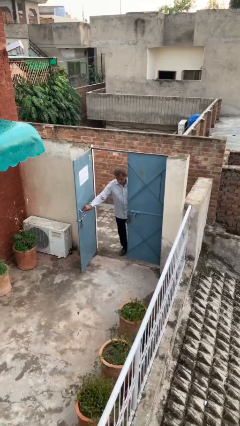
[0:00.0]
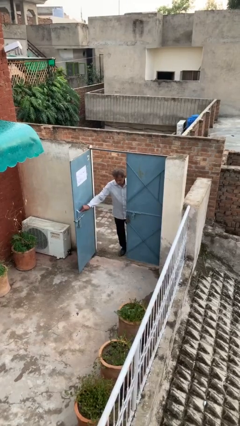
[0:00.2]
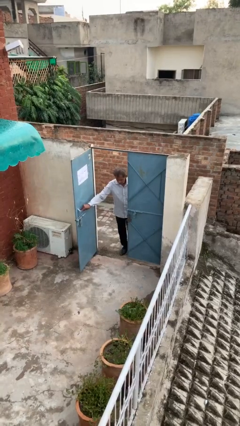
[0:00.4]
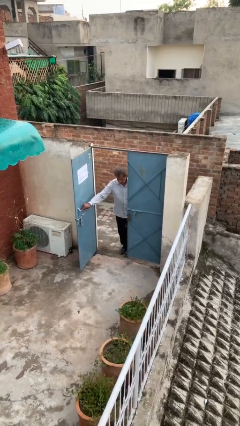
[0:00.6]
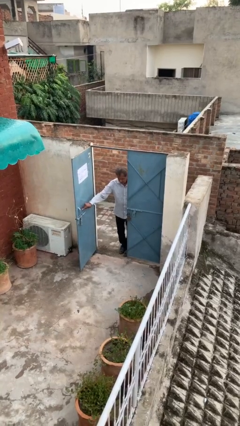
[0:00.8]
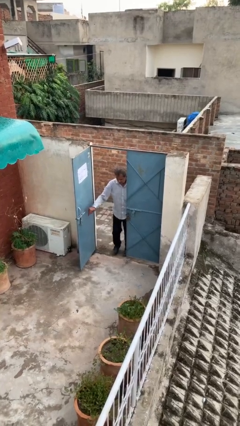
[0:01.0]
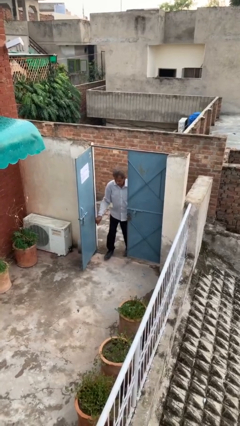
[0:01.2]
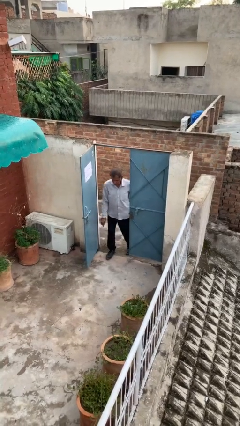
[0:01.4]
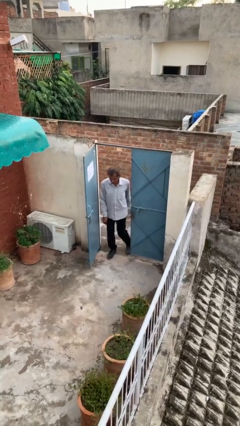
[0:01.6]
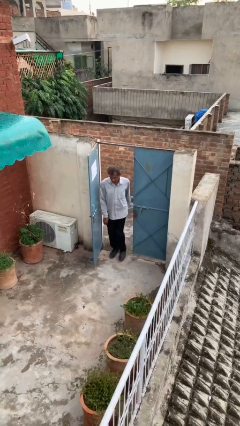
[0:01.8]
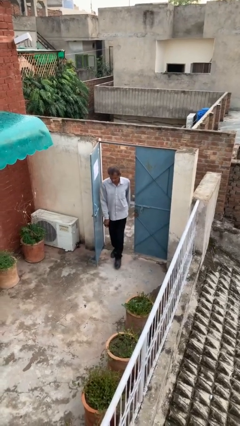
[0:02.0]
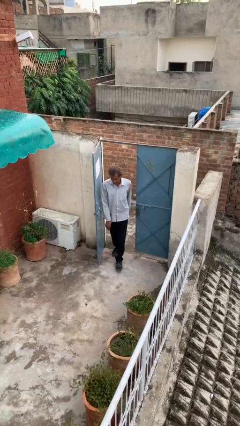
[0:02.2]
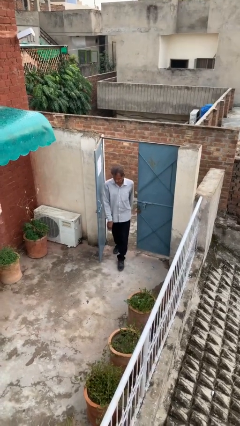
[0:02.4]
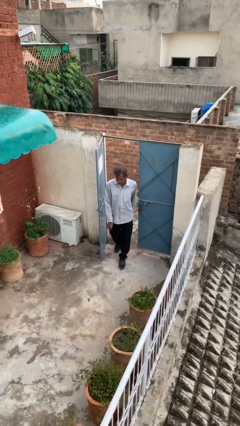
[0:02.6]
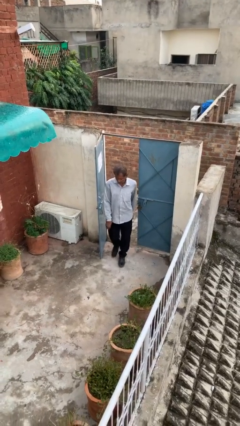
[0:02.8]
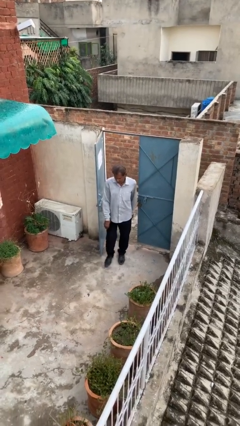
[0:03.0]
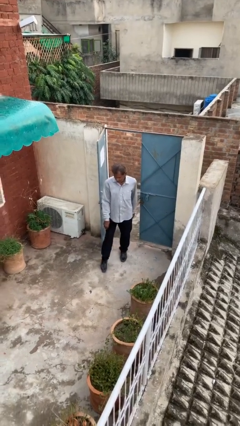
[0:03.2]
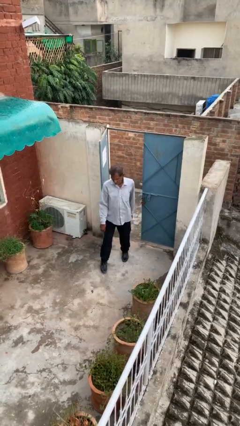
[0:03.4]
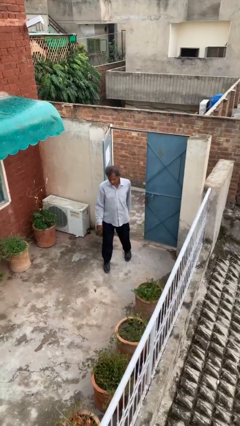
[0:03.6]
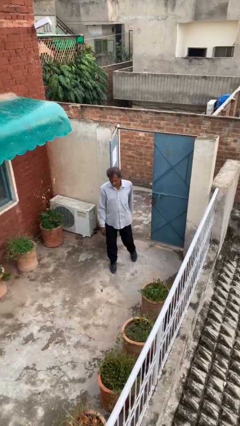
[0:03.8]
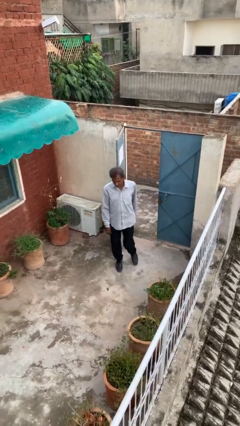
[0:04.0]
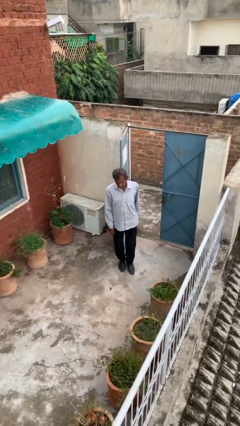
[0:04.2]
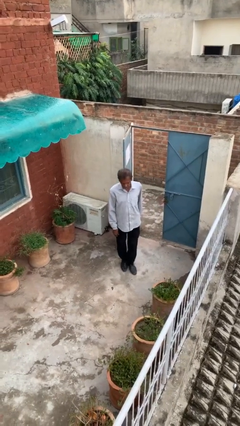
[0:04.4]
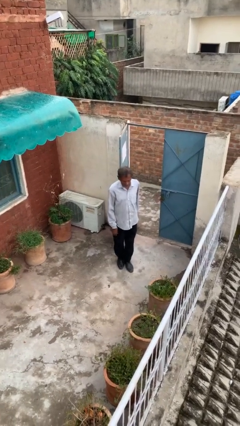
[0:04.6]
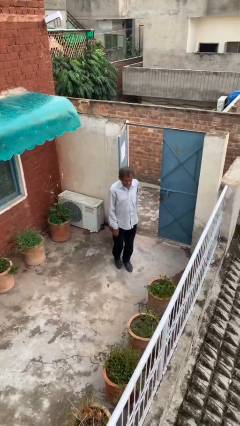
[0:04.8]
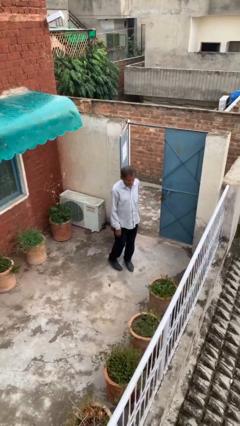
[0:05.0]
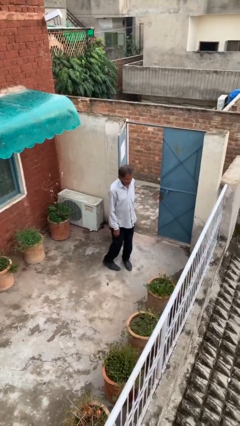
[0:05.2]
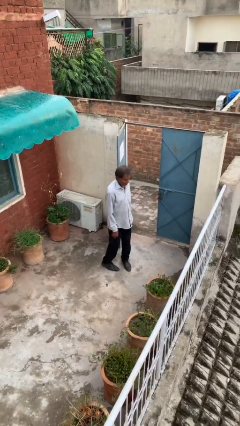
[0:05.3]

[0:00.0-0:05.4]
person enters scene through structure

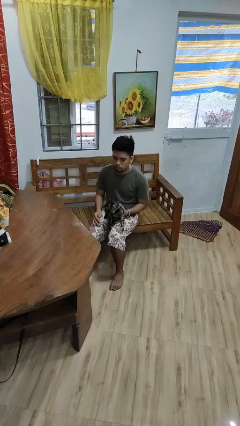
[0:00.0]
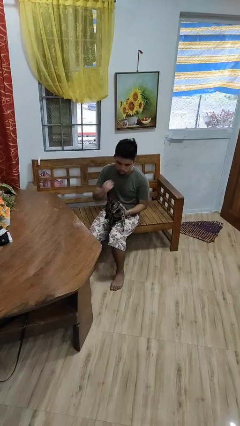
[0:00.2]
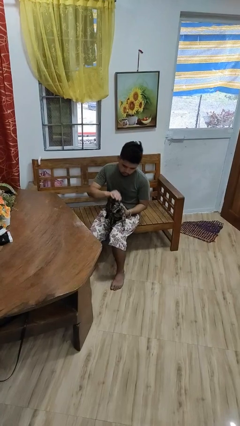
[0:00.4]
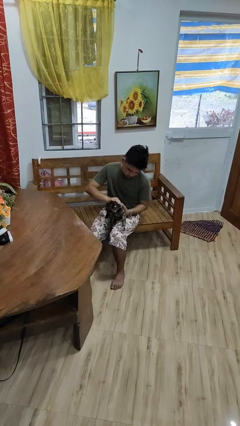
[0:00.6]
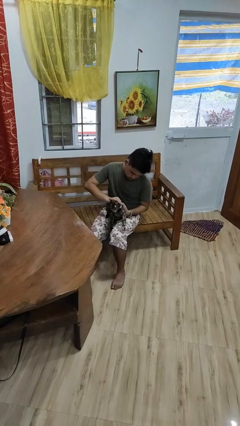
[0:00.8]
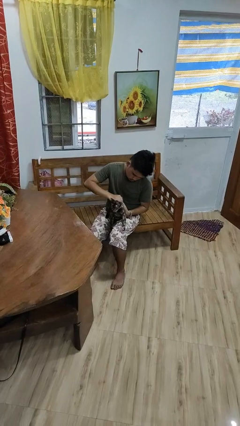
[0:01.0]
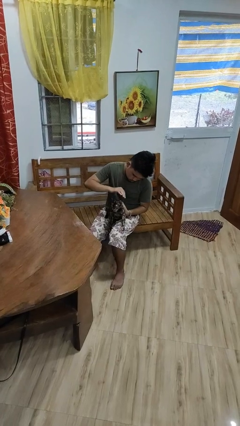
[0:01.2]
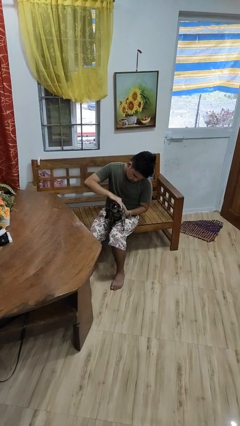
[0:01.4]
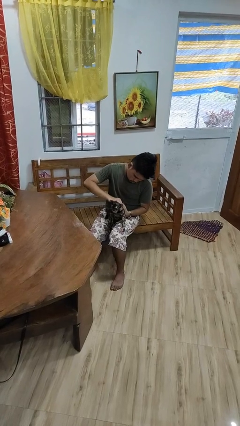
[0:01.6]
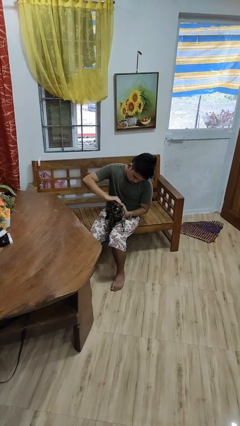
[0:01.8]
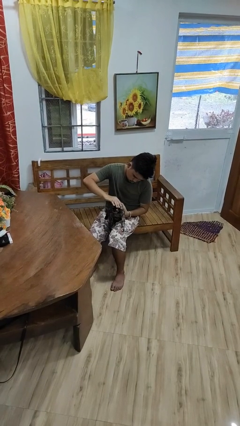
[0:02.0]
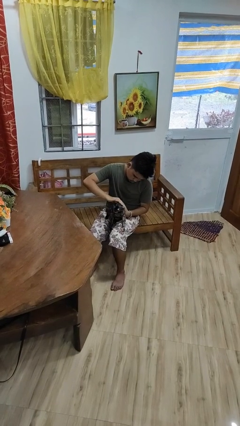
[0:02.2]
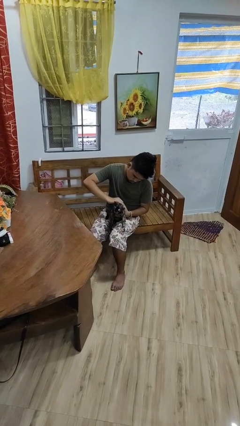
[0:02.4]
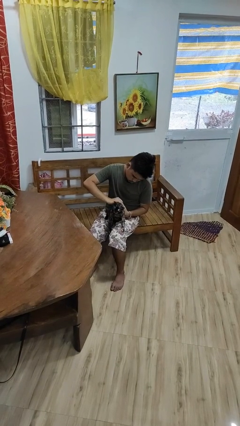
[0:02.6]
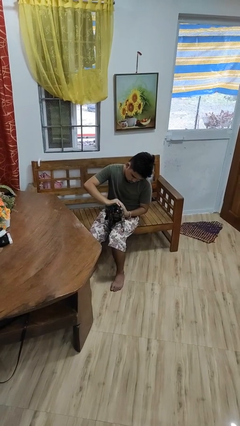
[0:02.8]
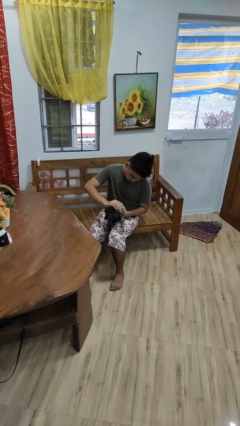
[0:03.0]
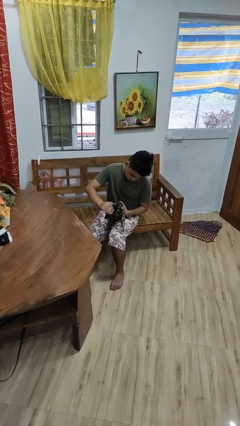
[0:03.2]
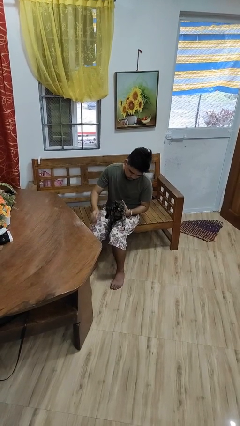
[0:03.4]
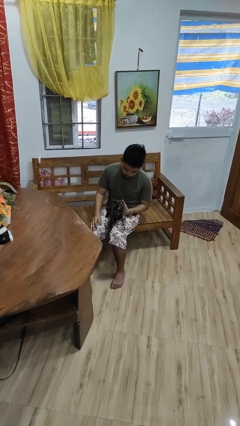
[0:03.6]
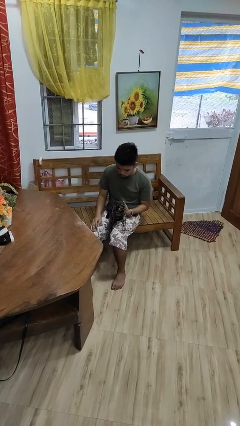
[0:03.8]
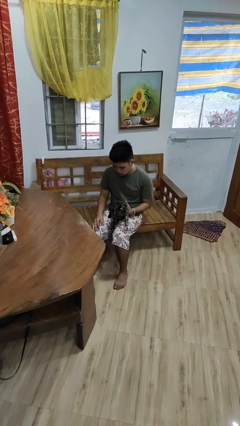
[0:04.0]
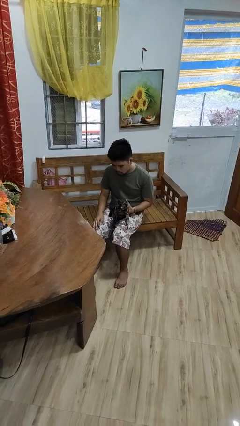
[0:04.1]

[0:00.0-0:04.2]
person pets cat

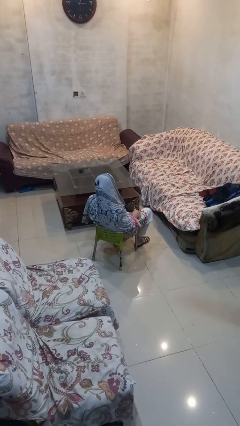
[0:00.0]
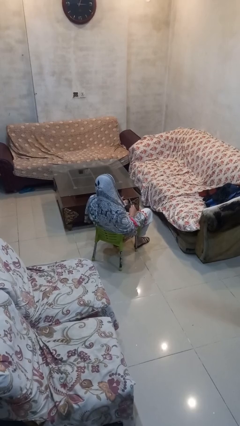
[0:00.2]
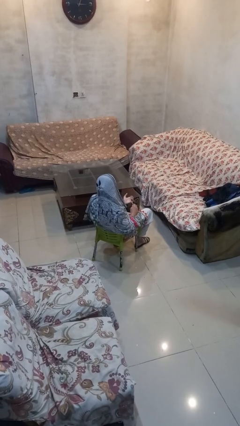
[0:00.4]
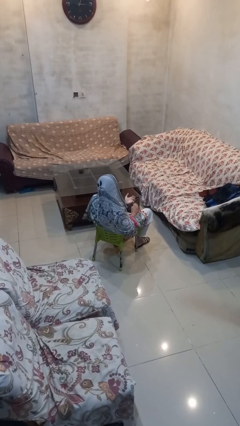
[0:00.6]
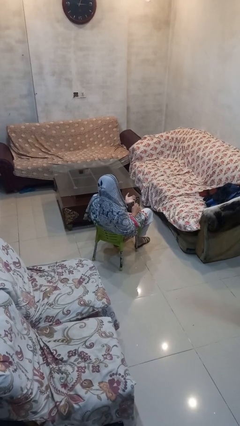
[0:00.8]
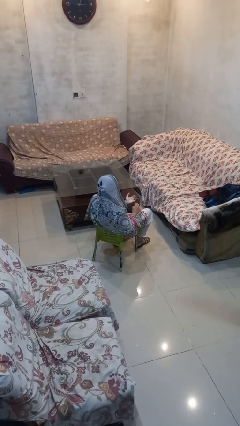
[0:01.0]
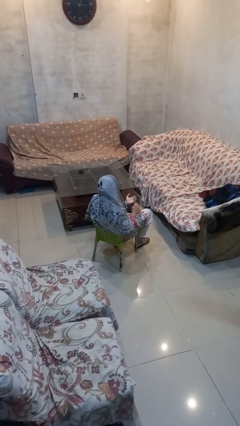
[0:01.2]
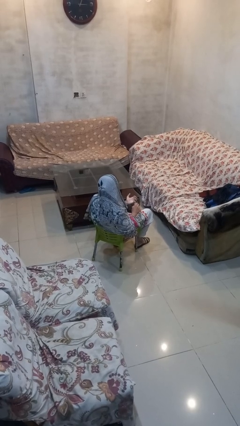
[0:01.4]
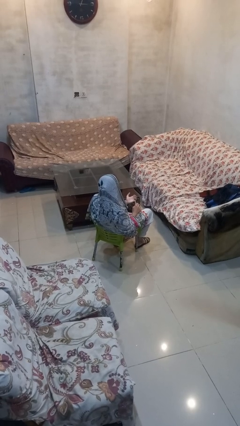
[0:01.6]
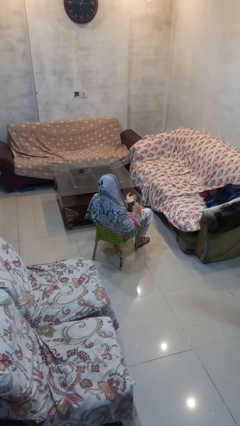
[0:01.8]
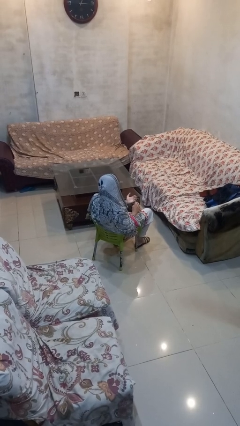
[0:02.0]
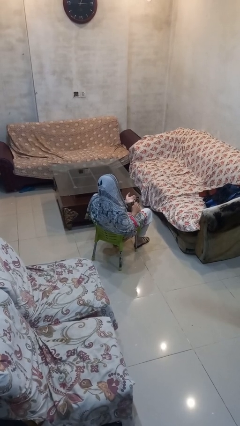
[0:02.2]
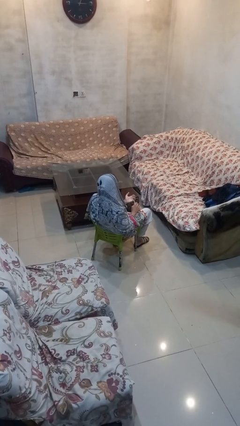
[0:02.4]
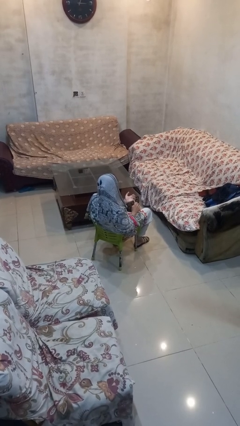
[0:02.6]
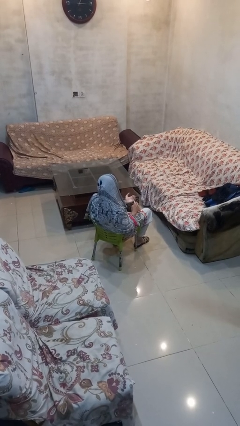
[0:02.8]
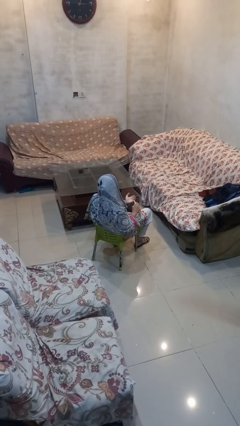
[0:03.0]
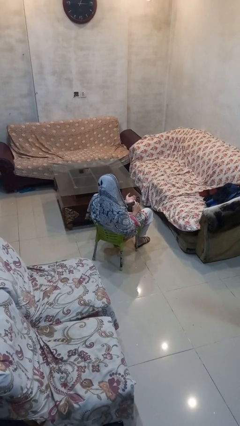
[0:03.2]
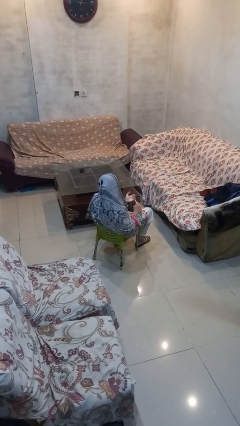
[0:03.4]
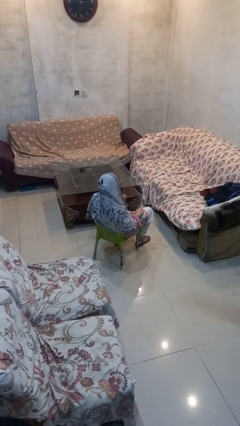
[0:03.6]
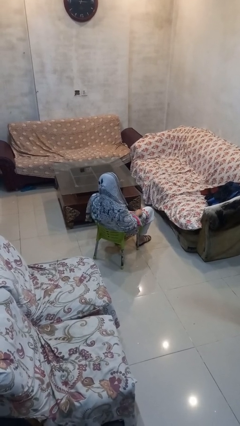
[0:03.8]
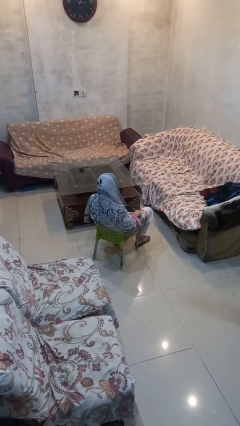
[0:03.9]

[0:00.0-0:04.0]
person files fingernails

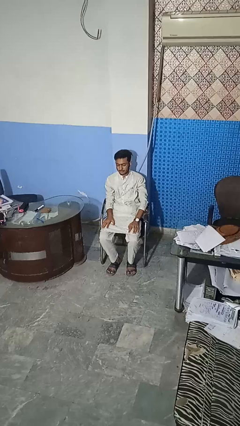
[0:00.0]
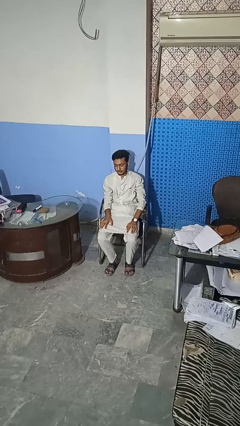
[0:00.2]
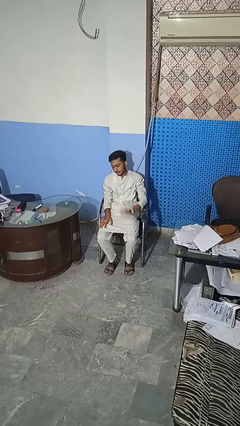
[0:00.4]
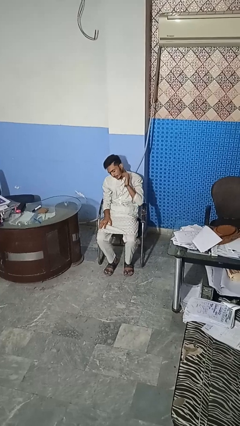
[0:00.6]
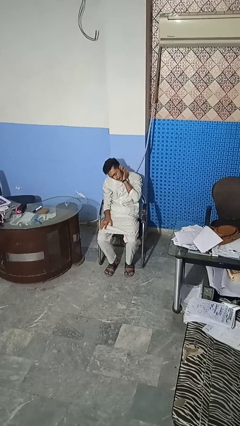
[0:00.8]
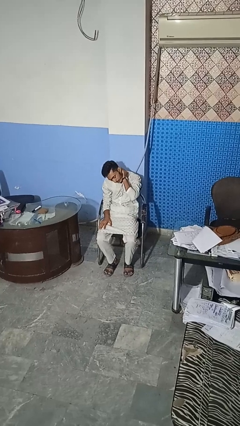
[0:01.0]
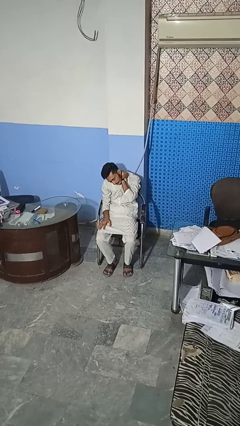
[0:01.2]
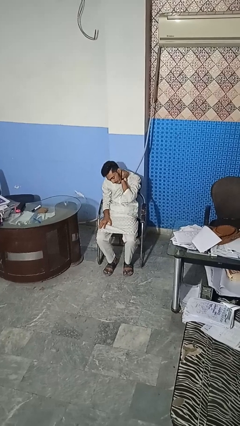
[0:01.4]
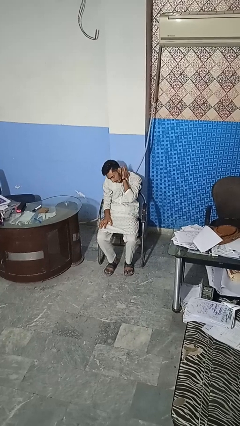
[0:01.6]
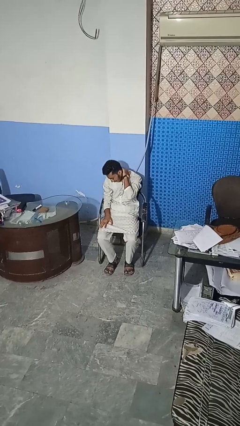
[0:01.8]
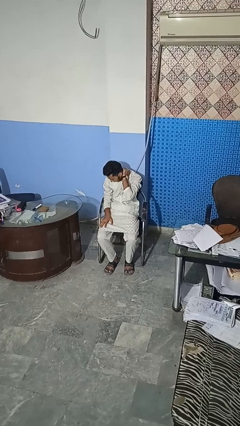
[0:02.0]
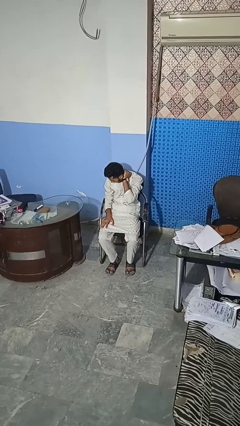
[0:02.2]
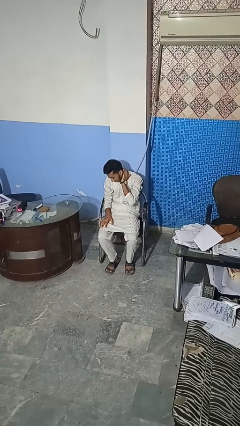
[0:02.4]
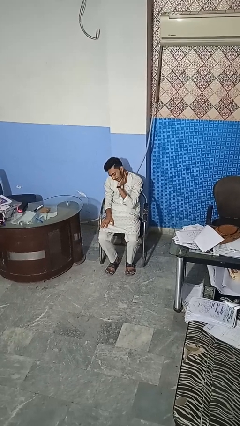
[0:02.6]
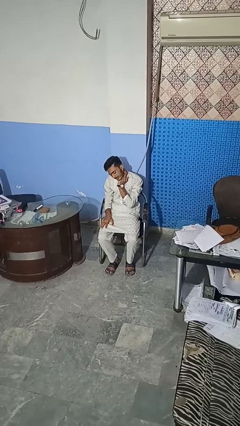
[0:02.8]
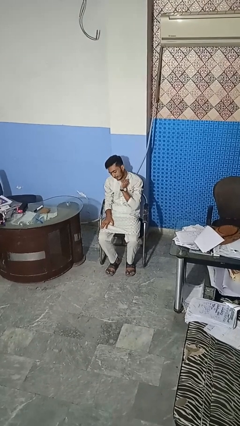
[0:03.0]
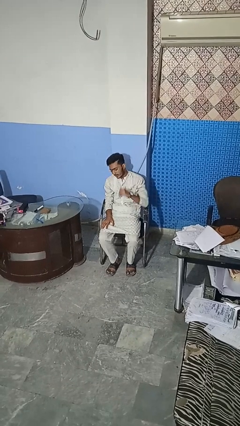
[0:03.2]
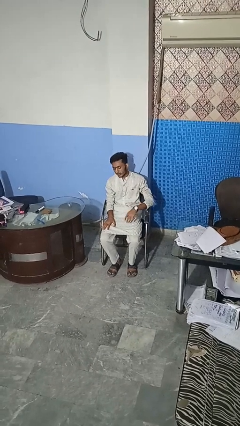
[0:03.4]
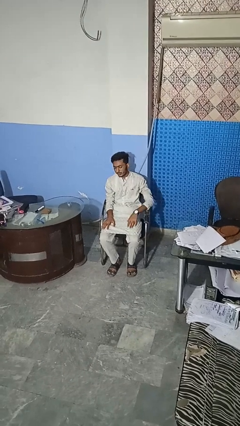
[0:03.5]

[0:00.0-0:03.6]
person rubs neck

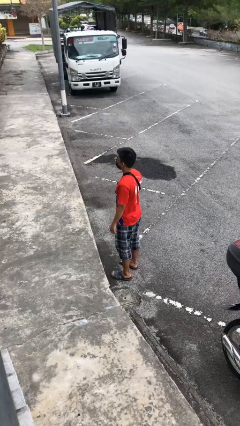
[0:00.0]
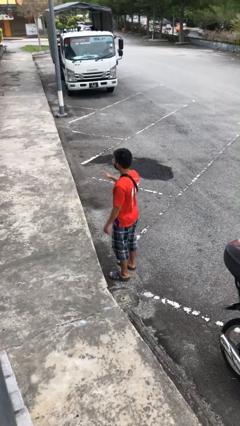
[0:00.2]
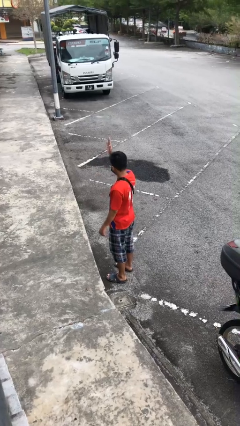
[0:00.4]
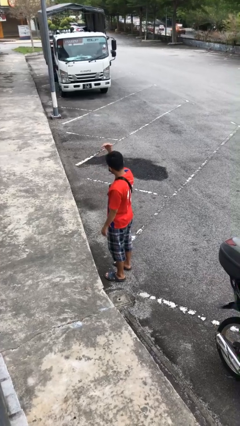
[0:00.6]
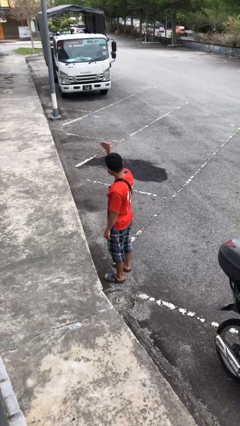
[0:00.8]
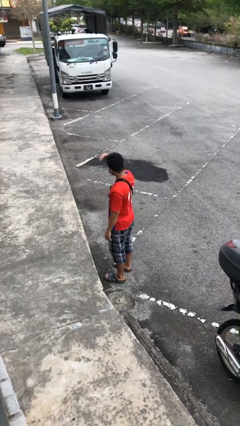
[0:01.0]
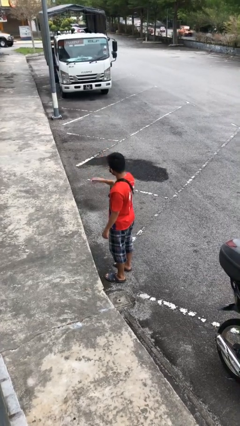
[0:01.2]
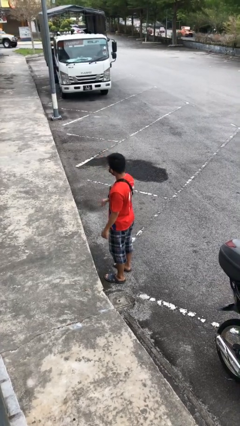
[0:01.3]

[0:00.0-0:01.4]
person gestures come here
